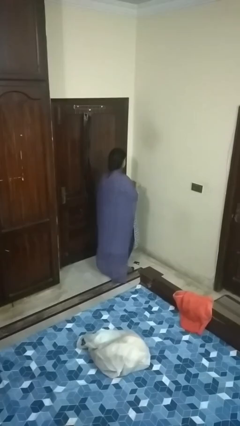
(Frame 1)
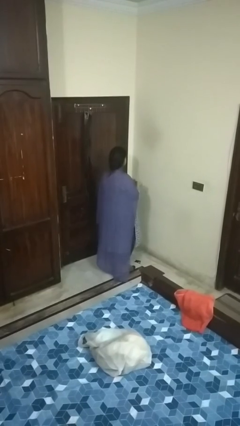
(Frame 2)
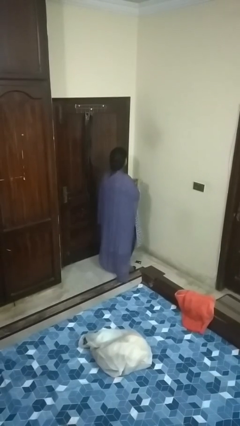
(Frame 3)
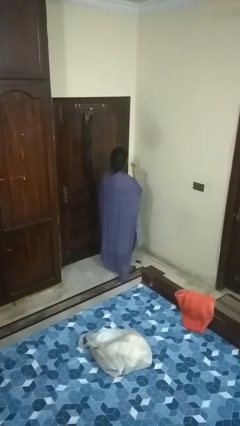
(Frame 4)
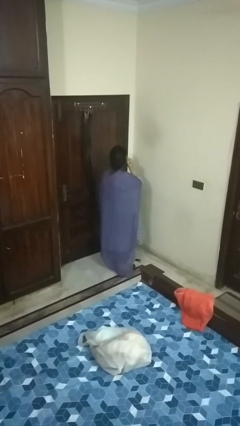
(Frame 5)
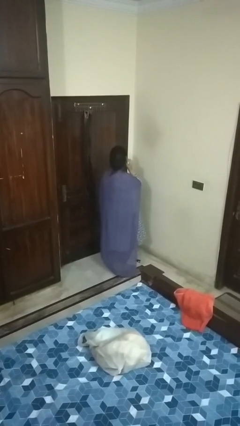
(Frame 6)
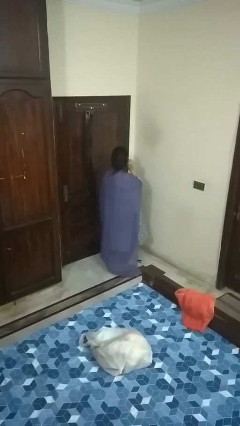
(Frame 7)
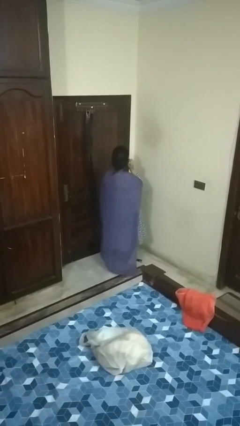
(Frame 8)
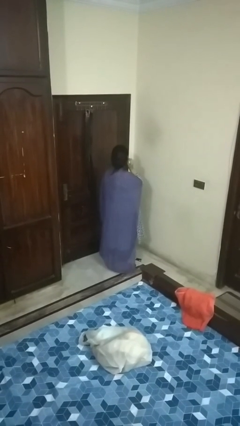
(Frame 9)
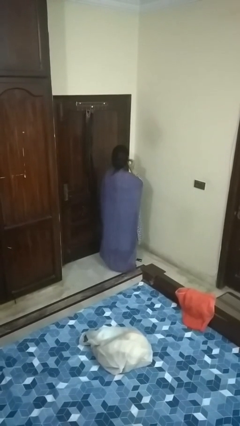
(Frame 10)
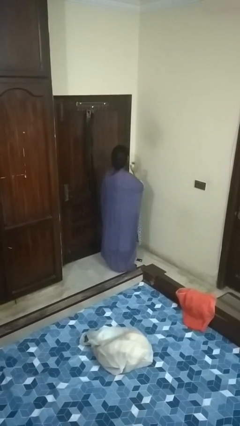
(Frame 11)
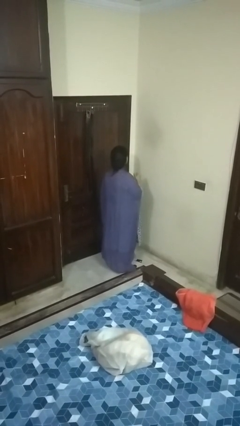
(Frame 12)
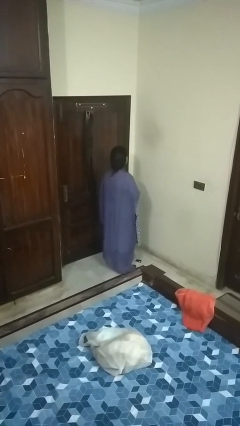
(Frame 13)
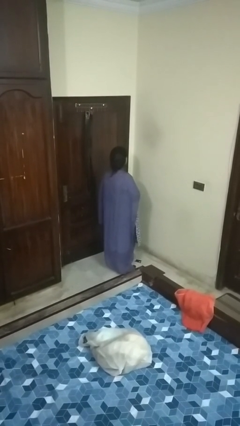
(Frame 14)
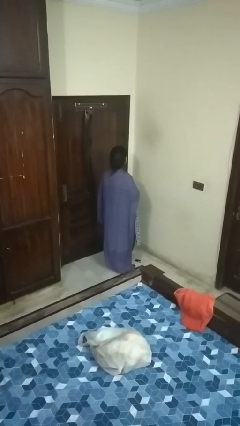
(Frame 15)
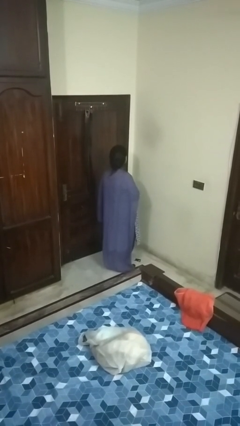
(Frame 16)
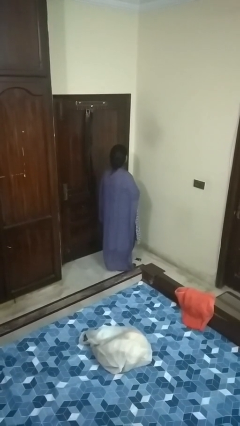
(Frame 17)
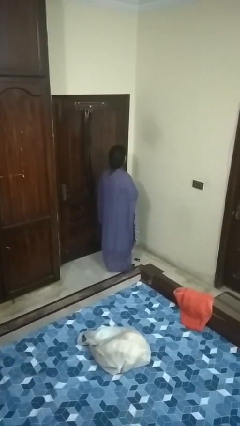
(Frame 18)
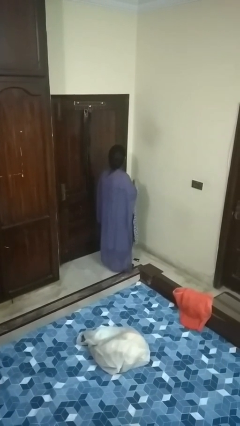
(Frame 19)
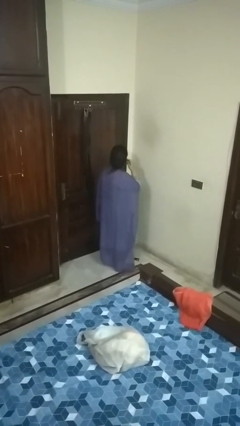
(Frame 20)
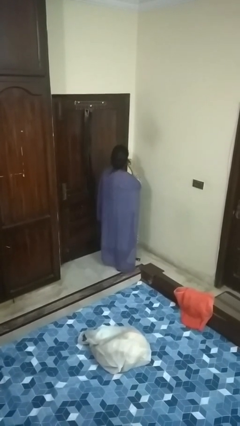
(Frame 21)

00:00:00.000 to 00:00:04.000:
person puts on earrings

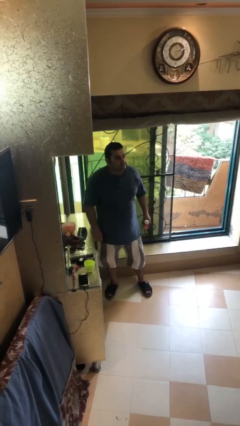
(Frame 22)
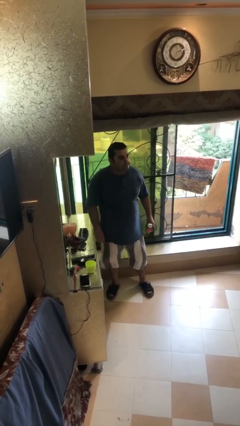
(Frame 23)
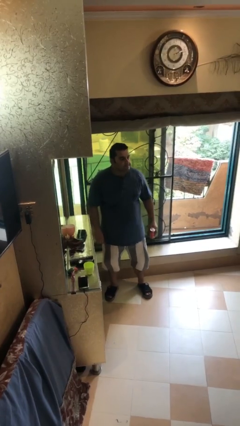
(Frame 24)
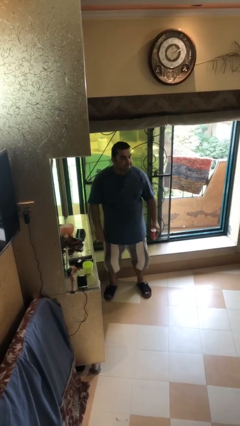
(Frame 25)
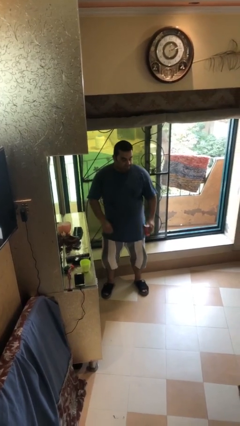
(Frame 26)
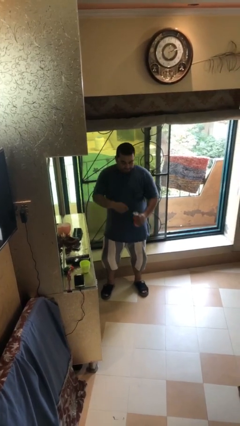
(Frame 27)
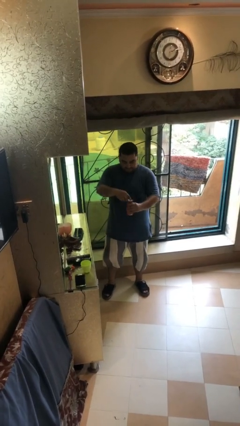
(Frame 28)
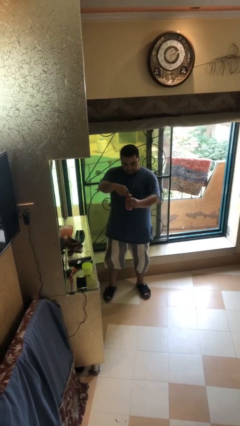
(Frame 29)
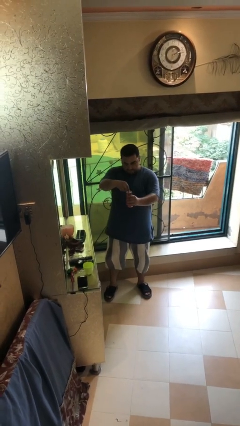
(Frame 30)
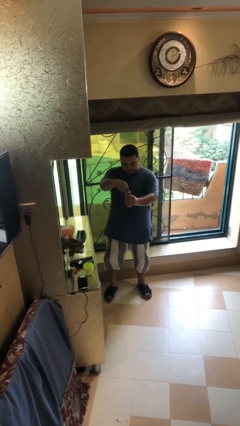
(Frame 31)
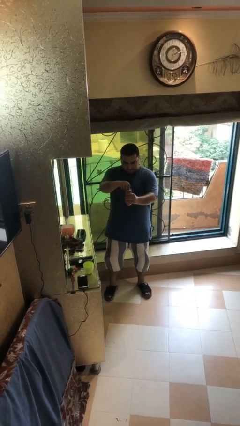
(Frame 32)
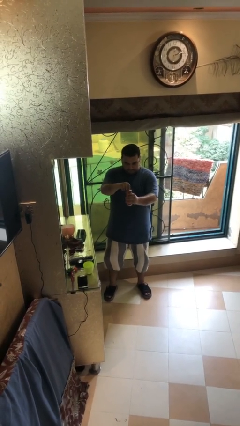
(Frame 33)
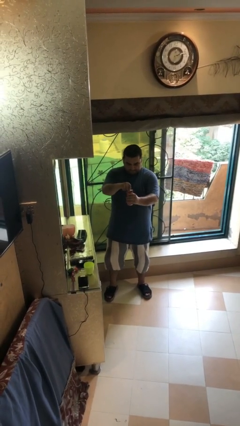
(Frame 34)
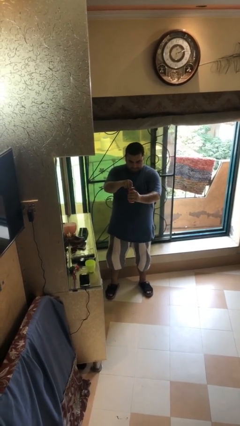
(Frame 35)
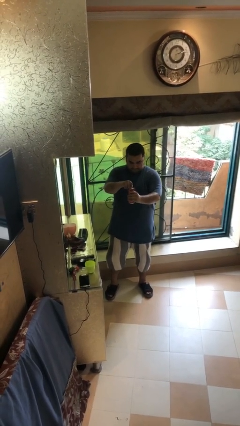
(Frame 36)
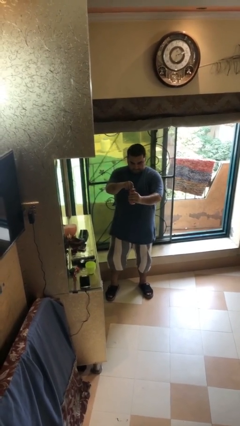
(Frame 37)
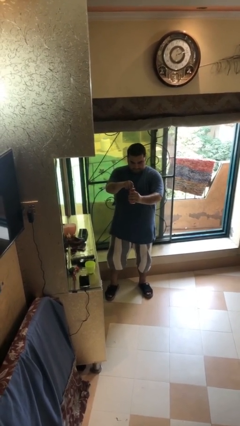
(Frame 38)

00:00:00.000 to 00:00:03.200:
person opens beverage can

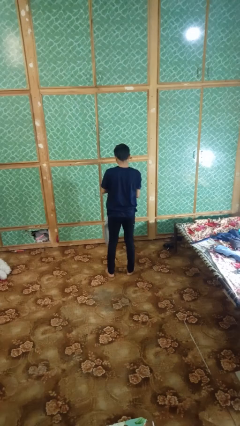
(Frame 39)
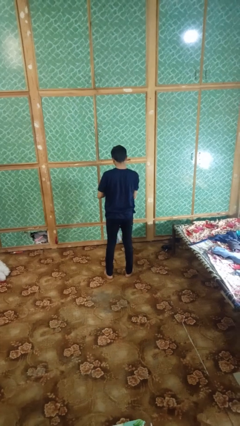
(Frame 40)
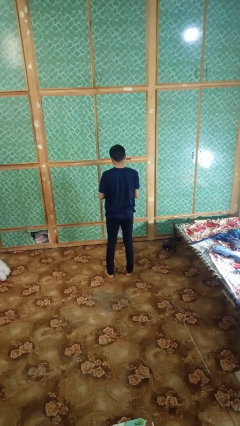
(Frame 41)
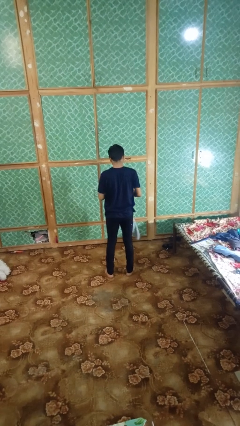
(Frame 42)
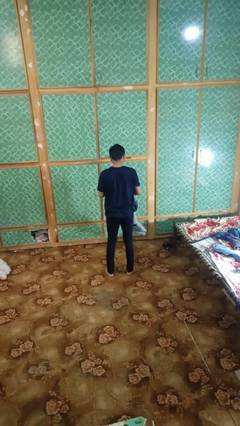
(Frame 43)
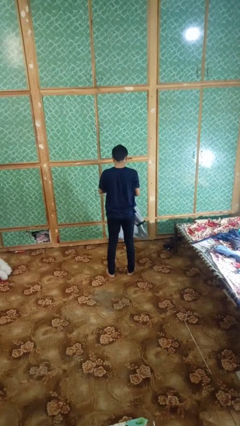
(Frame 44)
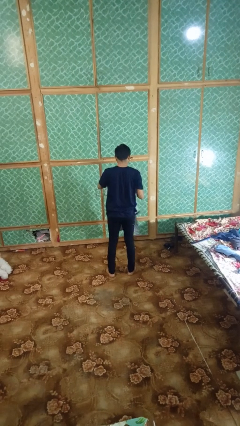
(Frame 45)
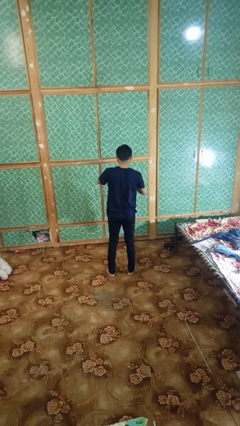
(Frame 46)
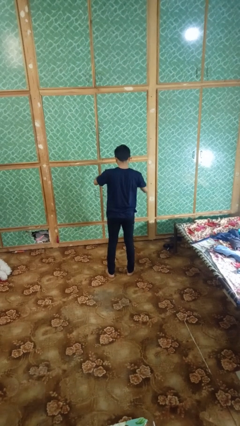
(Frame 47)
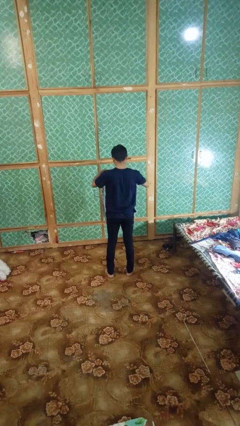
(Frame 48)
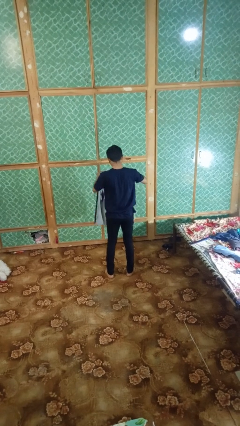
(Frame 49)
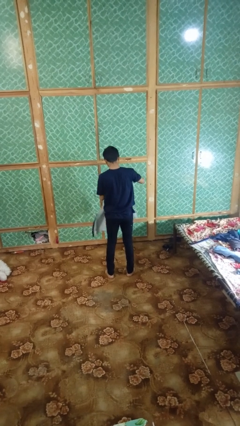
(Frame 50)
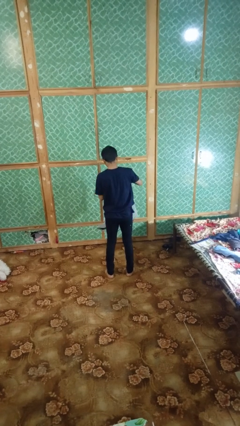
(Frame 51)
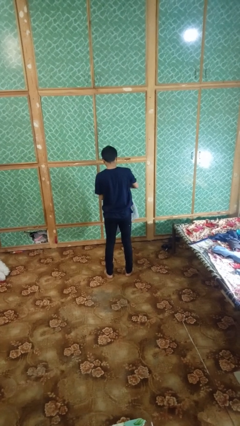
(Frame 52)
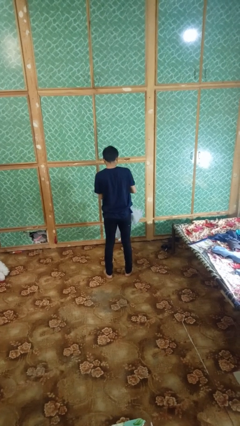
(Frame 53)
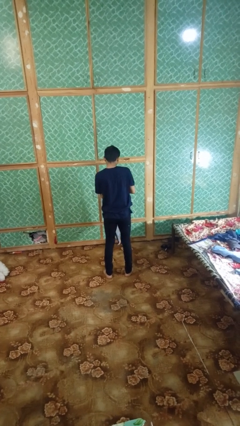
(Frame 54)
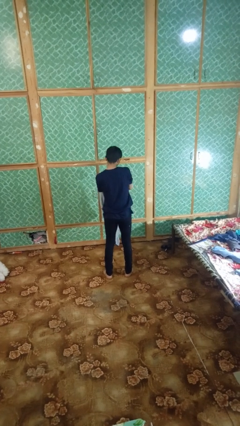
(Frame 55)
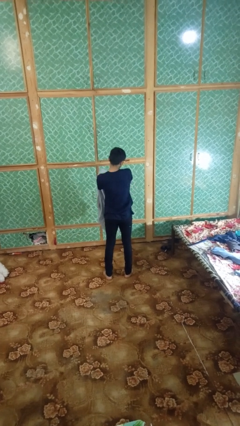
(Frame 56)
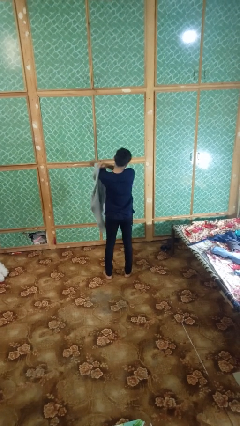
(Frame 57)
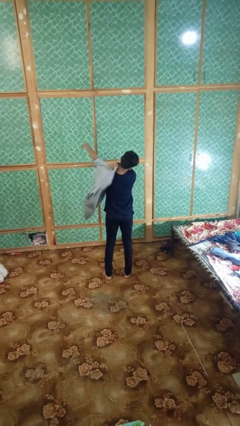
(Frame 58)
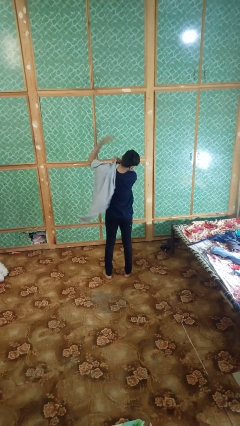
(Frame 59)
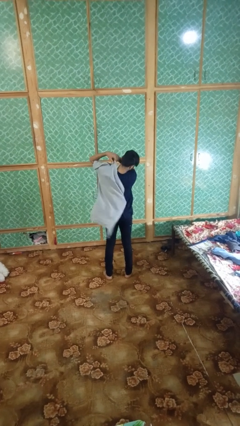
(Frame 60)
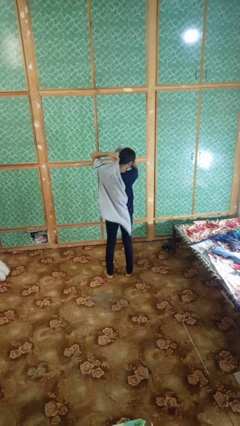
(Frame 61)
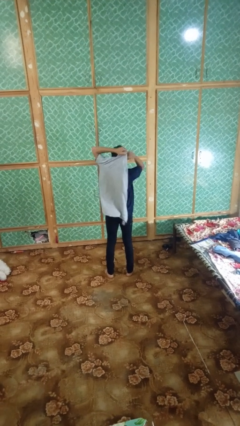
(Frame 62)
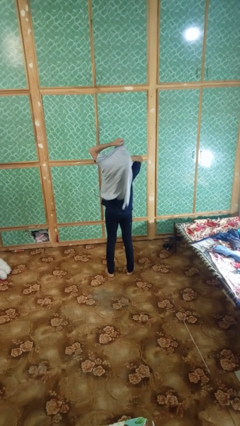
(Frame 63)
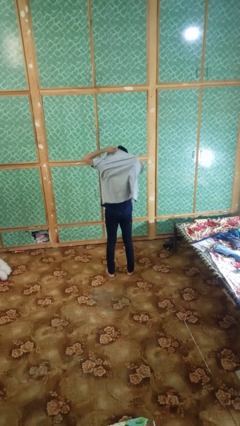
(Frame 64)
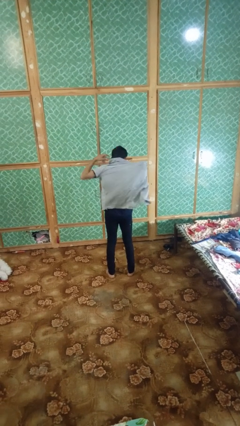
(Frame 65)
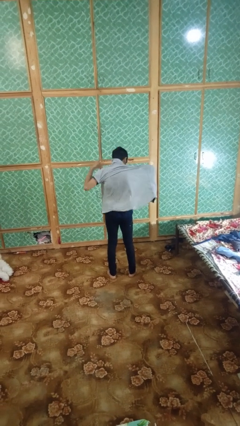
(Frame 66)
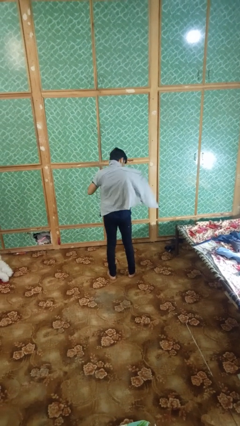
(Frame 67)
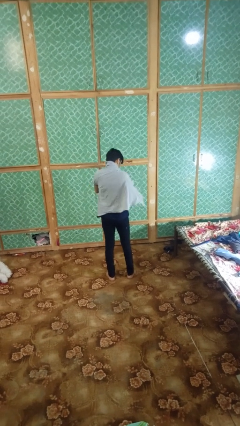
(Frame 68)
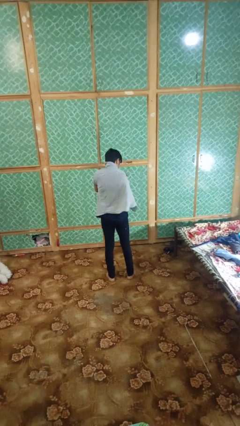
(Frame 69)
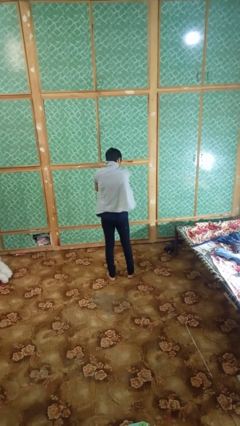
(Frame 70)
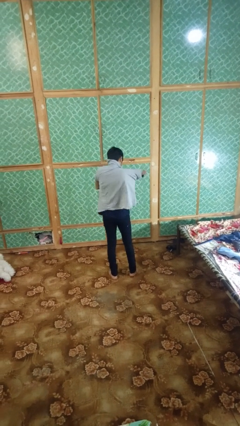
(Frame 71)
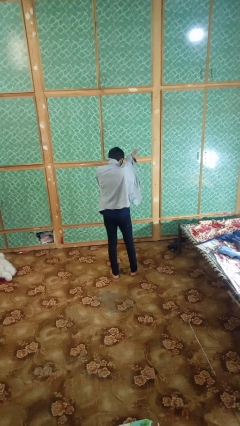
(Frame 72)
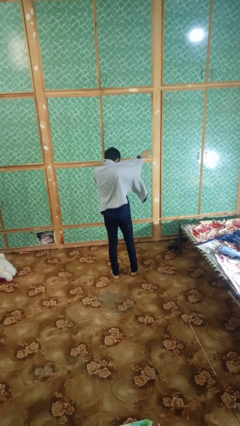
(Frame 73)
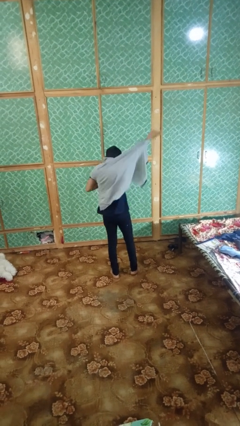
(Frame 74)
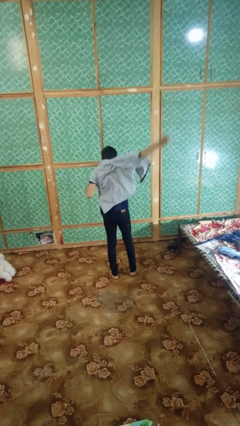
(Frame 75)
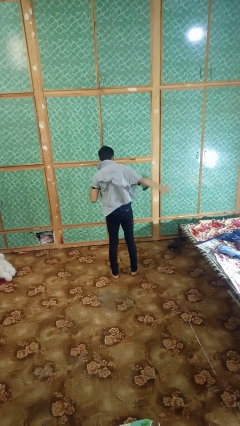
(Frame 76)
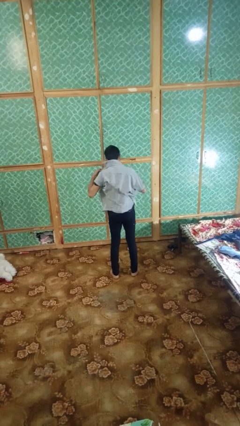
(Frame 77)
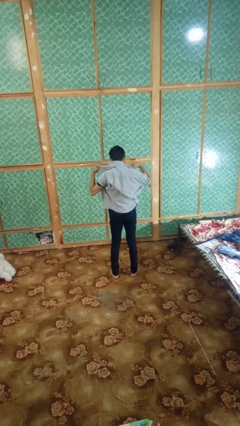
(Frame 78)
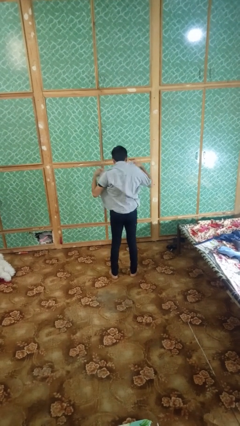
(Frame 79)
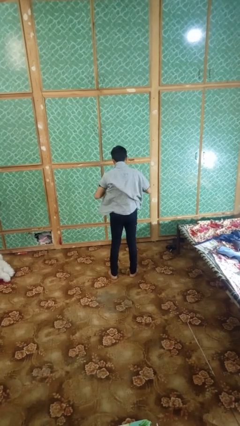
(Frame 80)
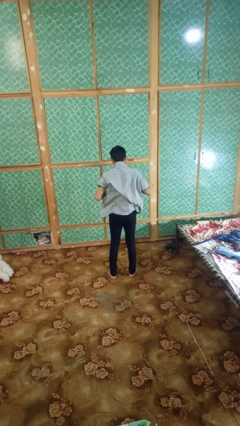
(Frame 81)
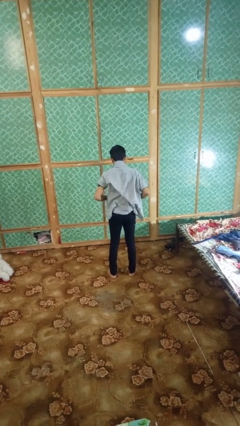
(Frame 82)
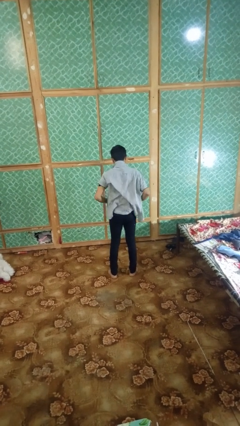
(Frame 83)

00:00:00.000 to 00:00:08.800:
person puts on shirt

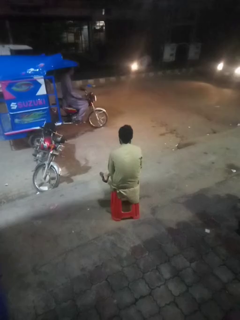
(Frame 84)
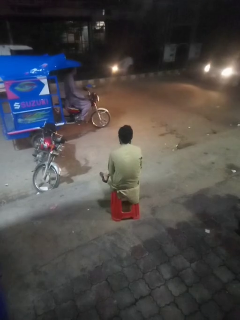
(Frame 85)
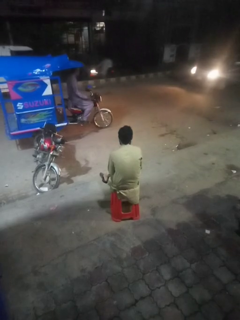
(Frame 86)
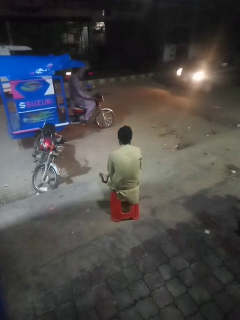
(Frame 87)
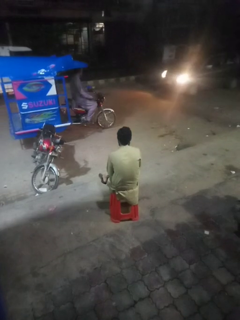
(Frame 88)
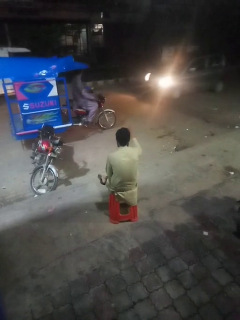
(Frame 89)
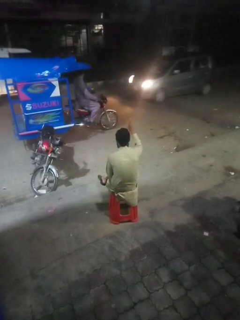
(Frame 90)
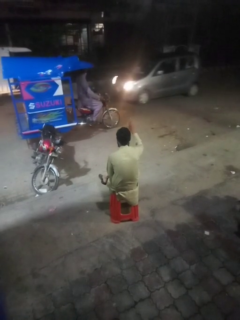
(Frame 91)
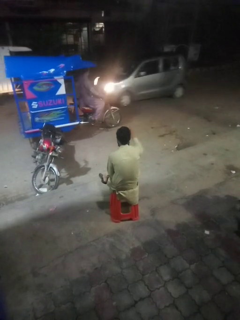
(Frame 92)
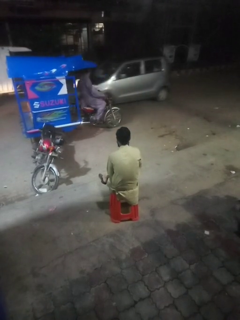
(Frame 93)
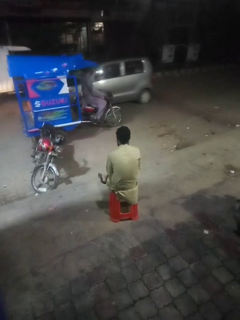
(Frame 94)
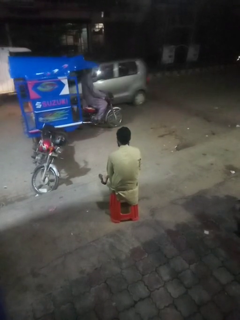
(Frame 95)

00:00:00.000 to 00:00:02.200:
person gestures number one

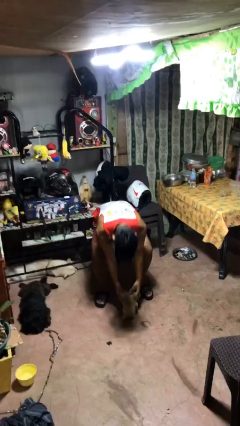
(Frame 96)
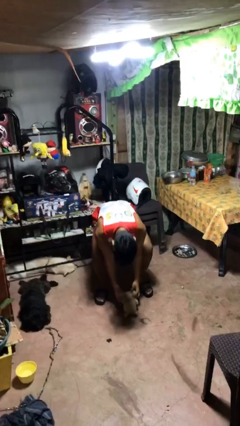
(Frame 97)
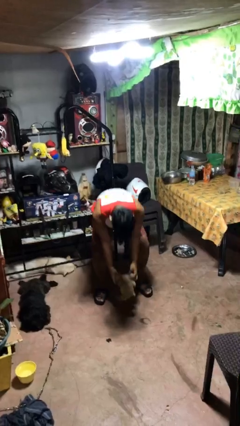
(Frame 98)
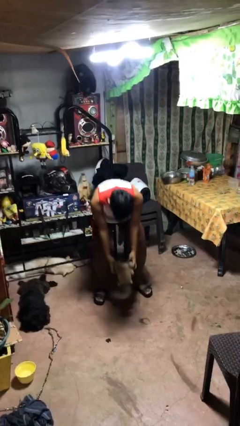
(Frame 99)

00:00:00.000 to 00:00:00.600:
person catches dropped object
